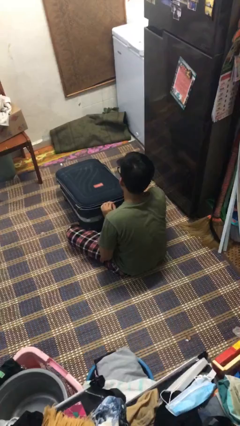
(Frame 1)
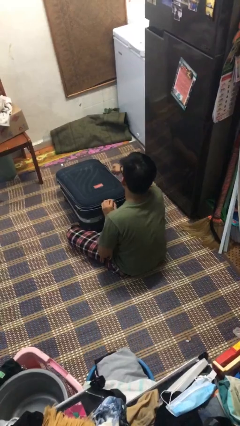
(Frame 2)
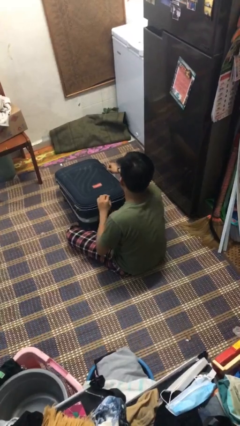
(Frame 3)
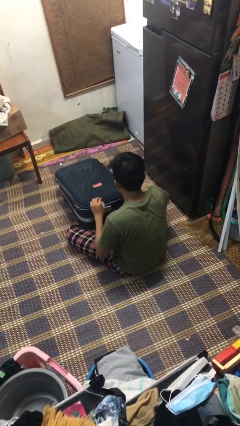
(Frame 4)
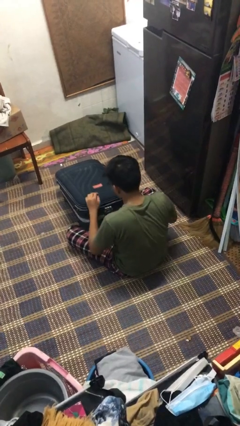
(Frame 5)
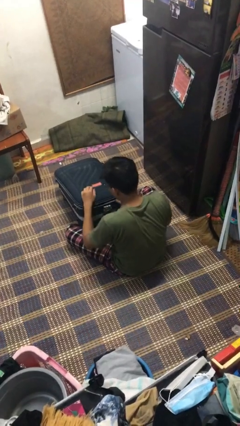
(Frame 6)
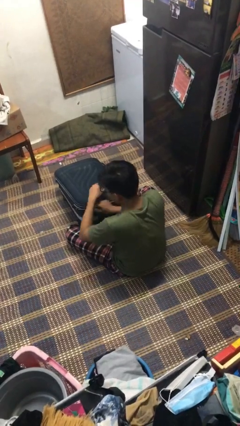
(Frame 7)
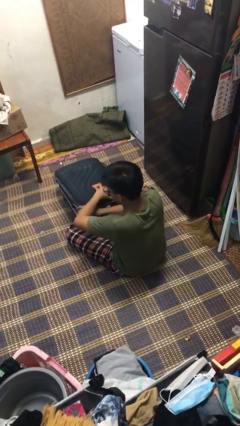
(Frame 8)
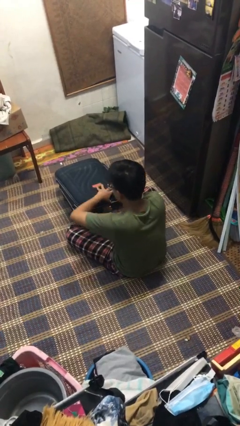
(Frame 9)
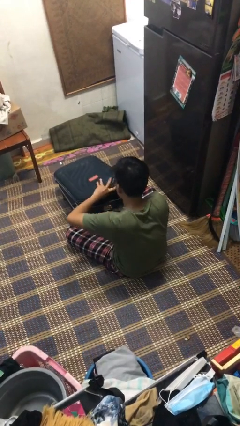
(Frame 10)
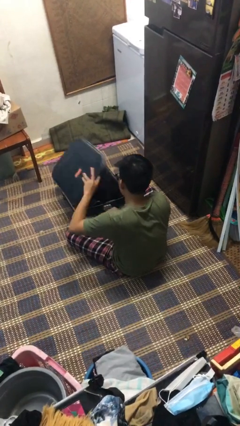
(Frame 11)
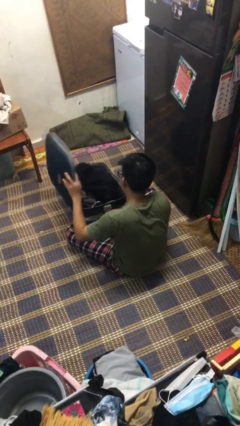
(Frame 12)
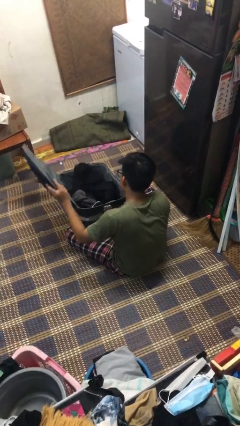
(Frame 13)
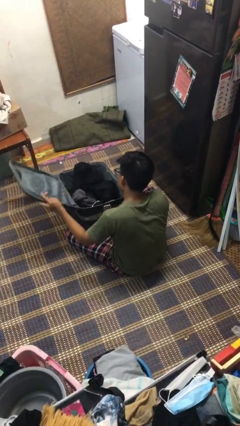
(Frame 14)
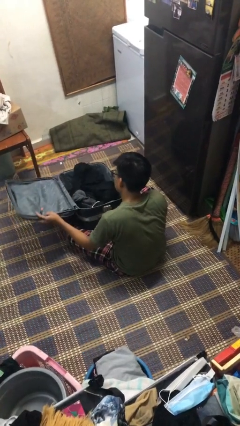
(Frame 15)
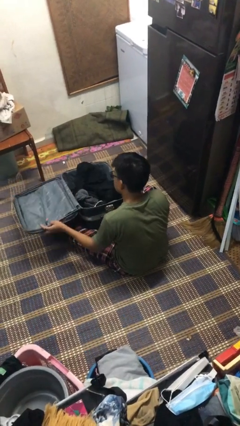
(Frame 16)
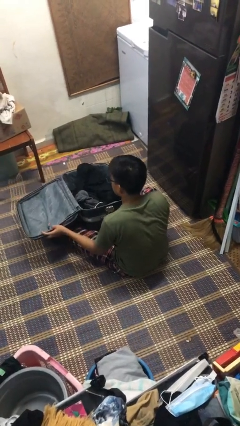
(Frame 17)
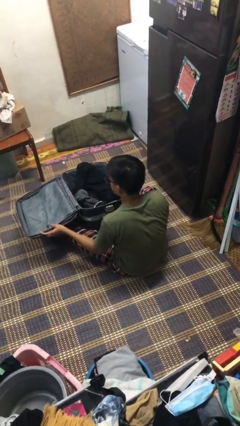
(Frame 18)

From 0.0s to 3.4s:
person opens suitcase

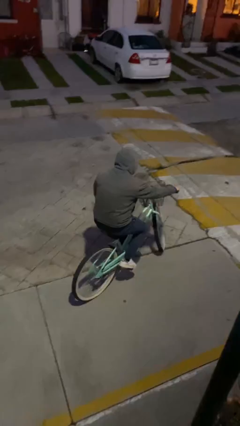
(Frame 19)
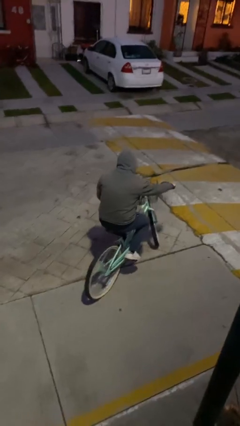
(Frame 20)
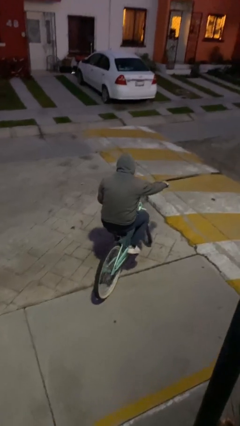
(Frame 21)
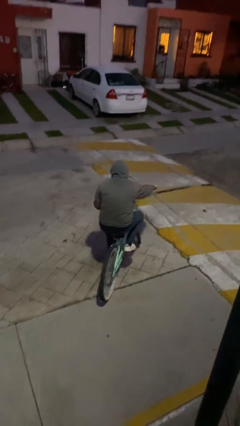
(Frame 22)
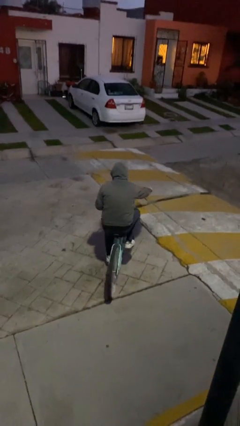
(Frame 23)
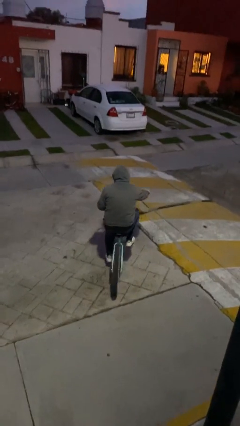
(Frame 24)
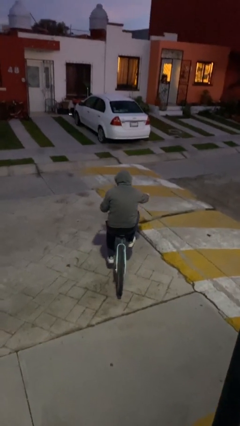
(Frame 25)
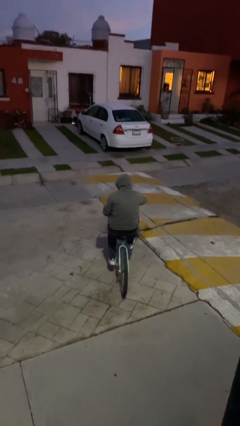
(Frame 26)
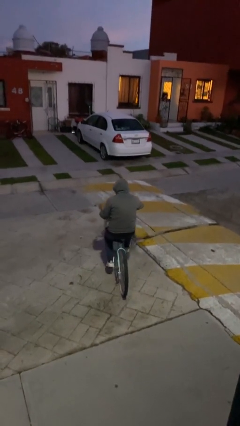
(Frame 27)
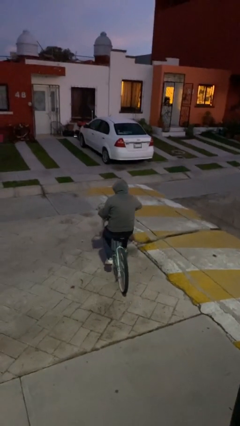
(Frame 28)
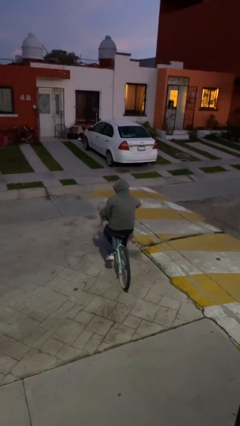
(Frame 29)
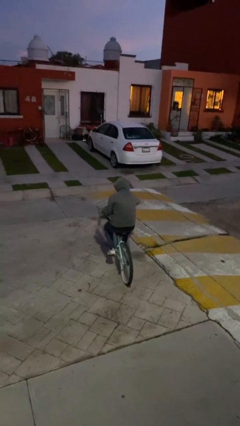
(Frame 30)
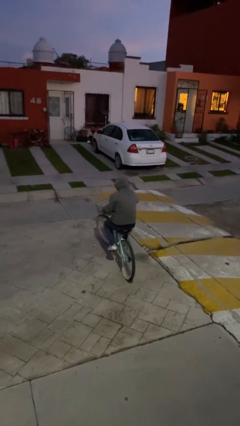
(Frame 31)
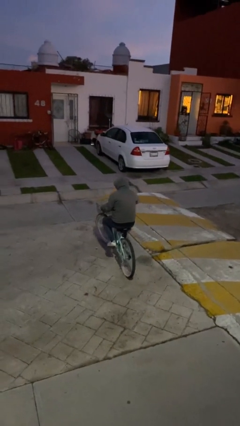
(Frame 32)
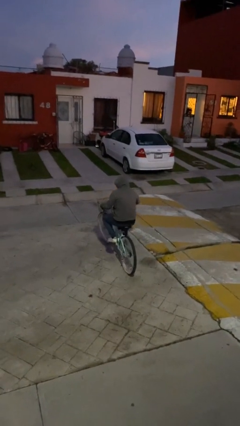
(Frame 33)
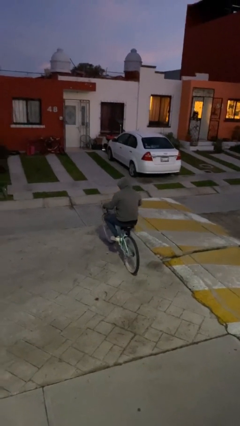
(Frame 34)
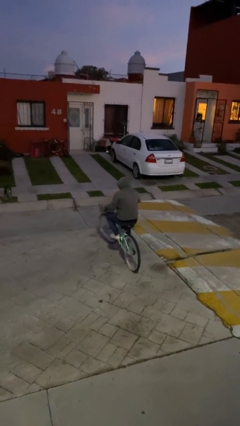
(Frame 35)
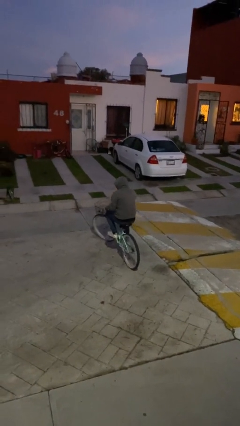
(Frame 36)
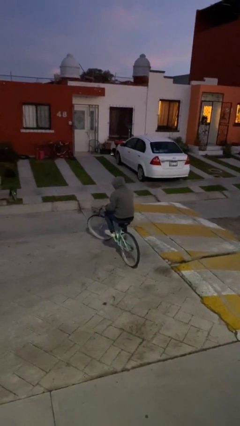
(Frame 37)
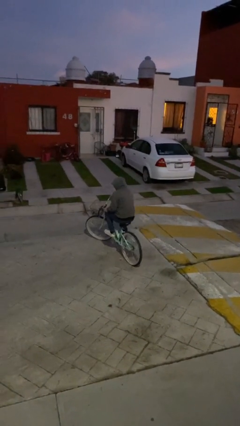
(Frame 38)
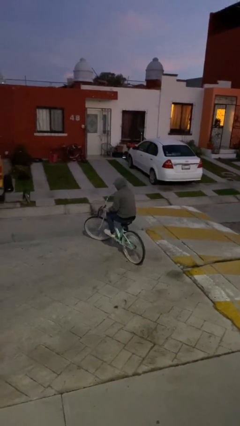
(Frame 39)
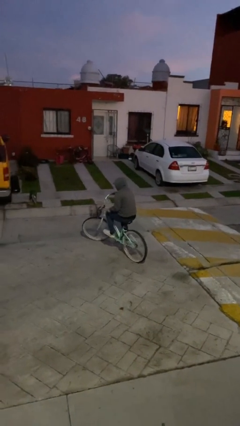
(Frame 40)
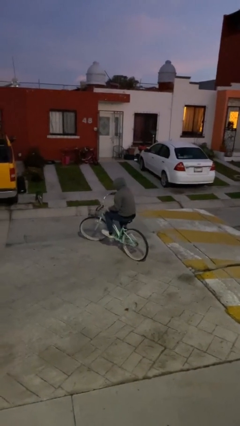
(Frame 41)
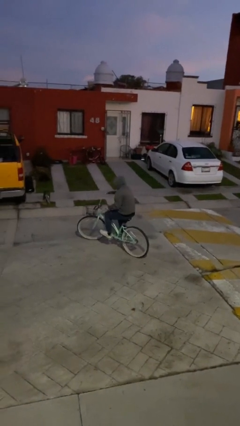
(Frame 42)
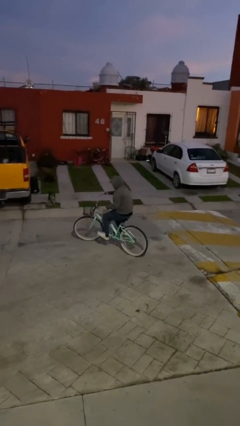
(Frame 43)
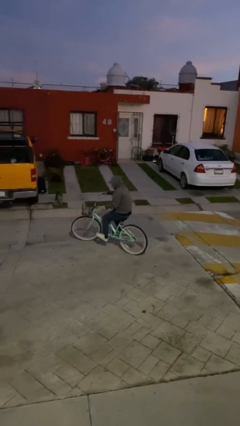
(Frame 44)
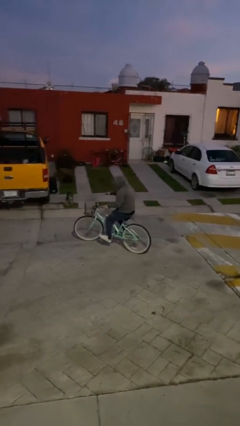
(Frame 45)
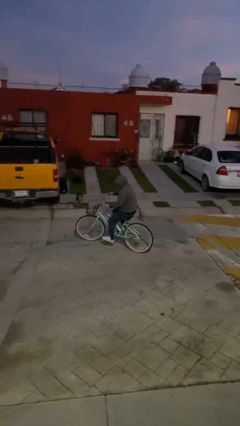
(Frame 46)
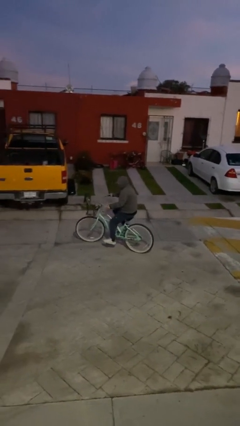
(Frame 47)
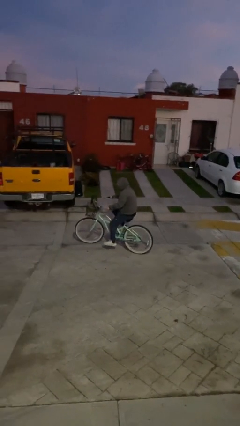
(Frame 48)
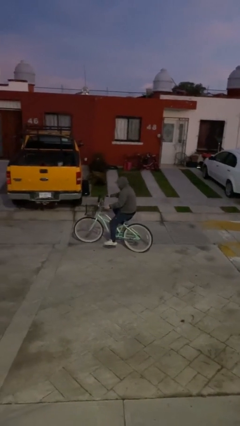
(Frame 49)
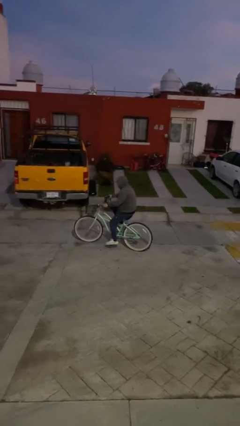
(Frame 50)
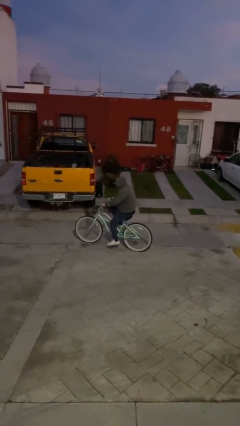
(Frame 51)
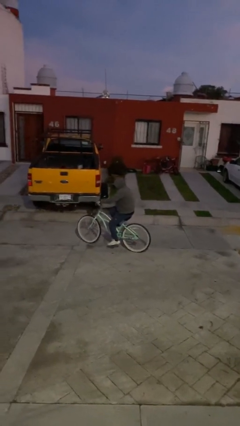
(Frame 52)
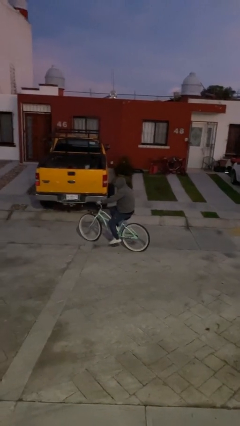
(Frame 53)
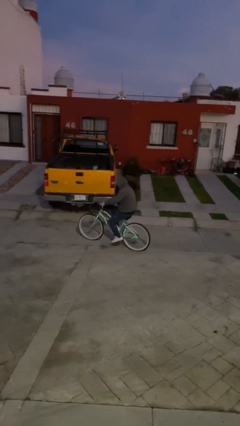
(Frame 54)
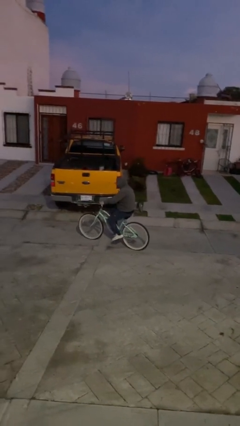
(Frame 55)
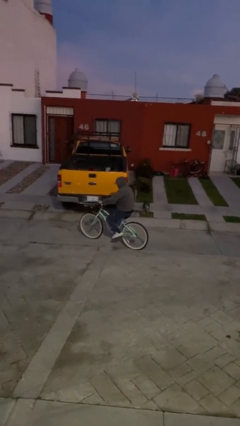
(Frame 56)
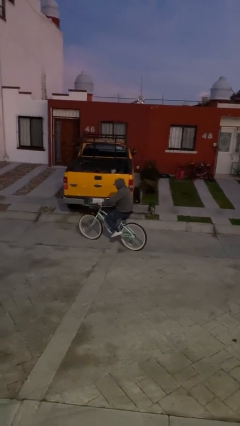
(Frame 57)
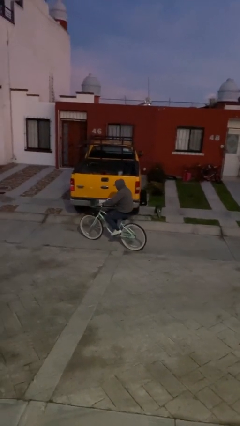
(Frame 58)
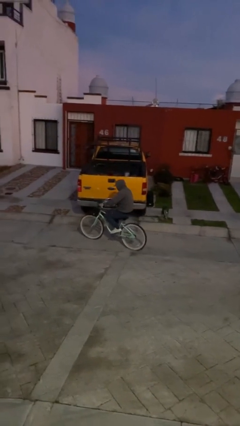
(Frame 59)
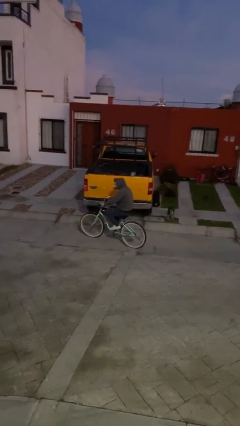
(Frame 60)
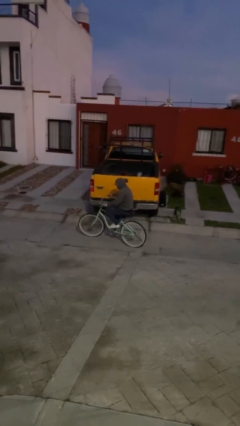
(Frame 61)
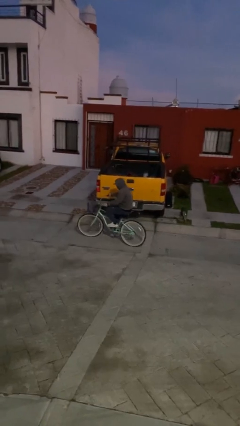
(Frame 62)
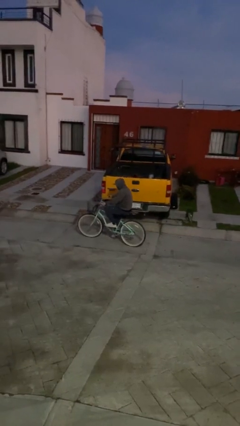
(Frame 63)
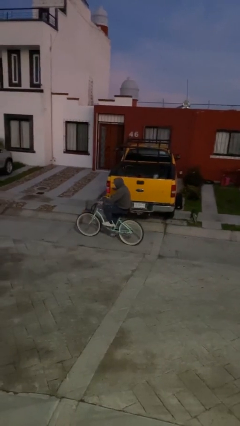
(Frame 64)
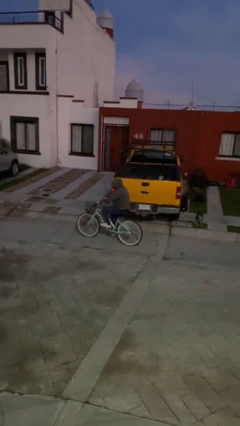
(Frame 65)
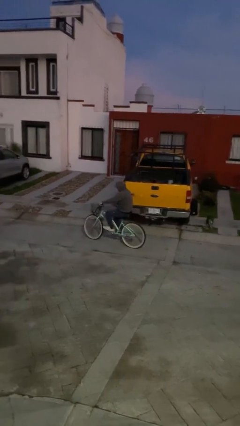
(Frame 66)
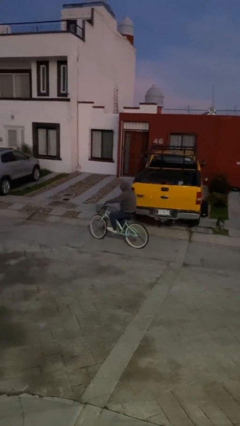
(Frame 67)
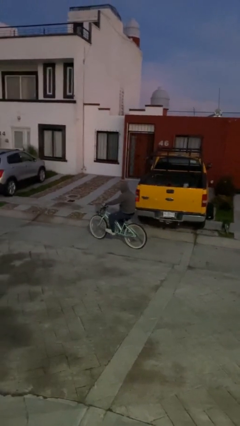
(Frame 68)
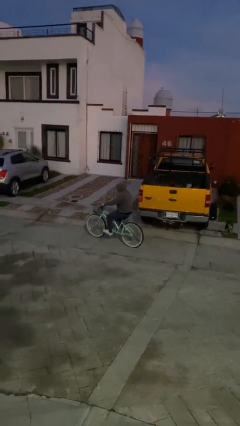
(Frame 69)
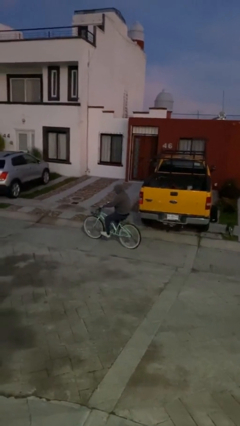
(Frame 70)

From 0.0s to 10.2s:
person rides bicycle

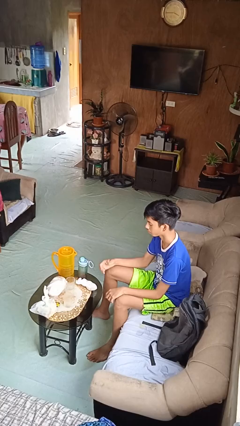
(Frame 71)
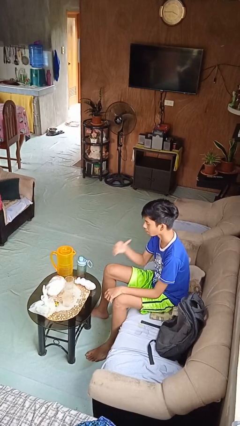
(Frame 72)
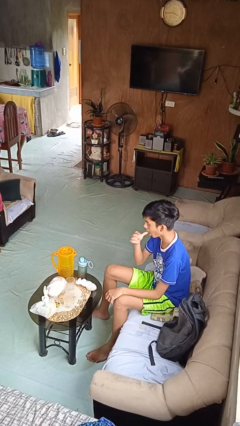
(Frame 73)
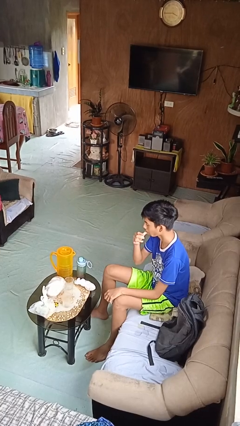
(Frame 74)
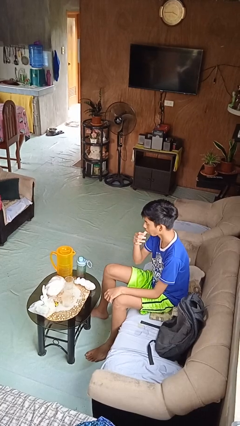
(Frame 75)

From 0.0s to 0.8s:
person licks fingers

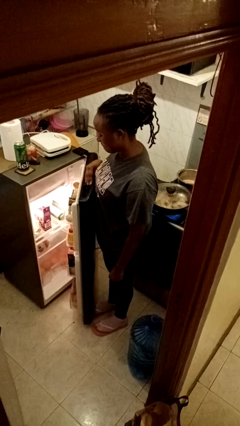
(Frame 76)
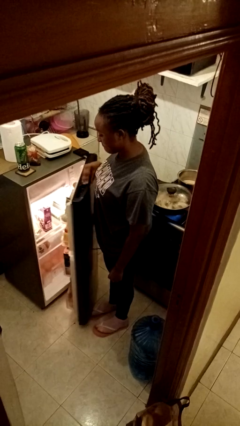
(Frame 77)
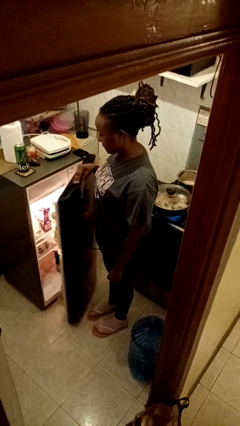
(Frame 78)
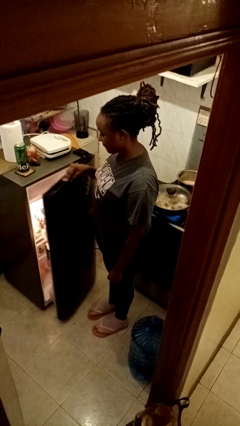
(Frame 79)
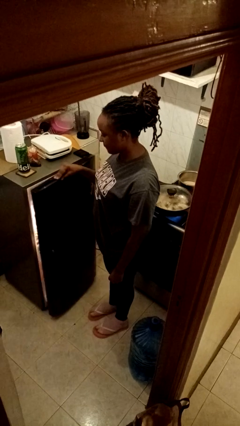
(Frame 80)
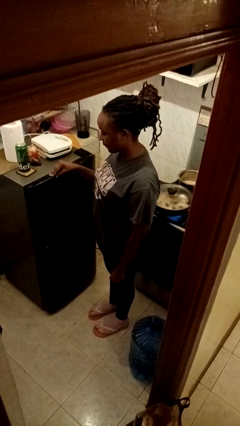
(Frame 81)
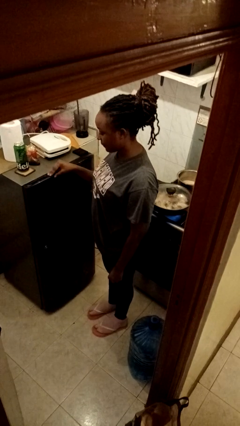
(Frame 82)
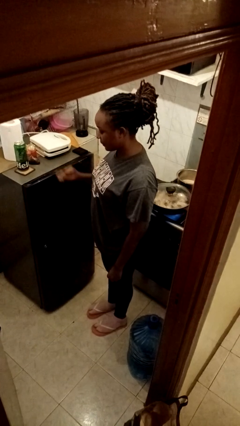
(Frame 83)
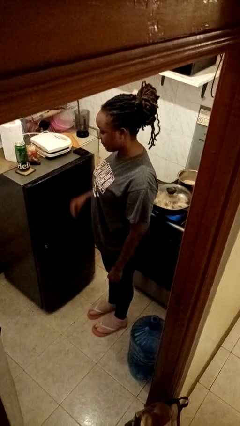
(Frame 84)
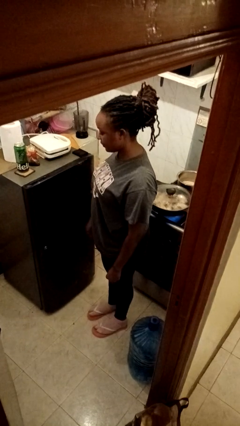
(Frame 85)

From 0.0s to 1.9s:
person closes refrigerator

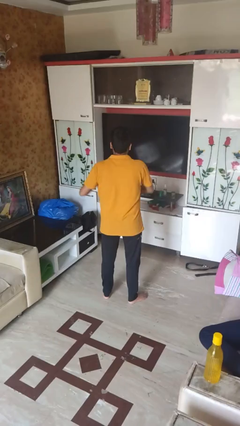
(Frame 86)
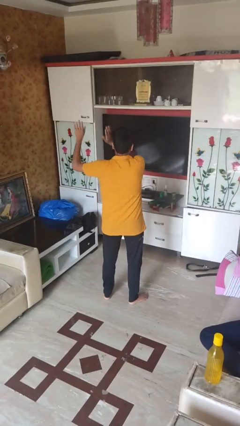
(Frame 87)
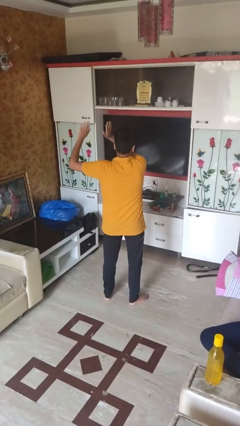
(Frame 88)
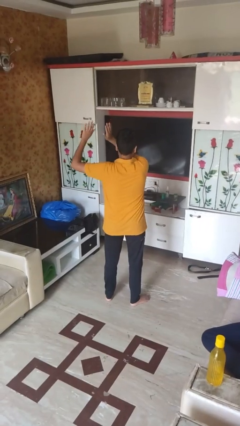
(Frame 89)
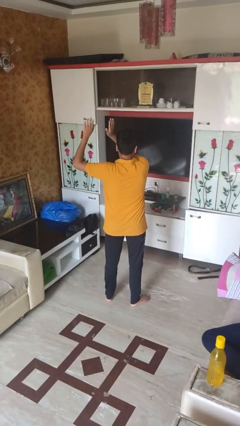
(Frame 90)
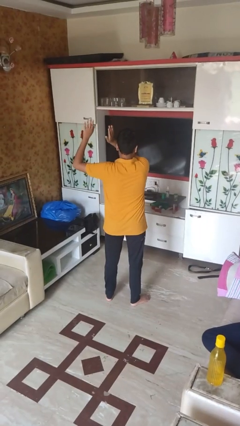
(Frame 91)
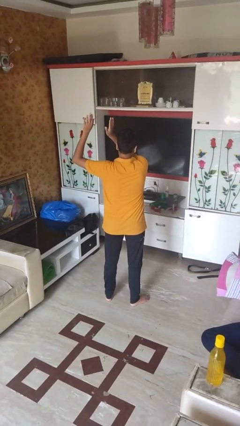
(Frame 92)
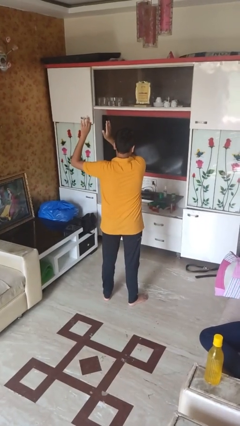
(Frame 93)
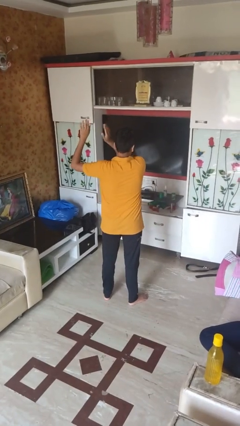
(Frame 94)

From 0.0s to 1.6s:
person dances in place
